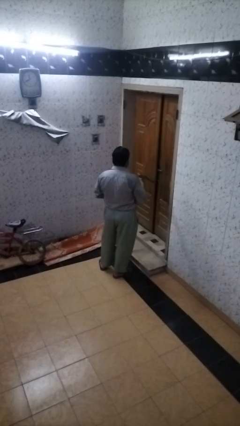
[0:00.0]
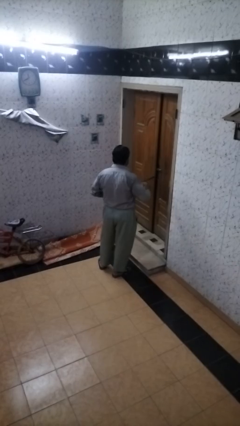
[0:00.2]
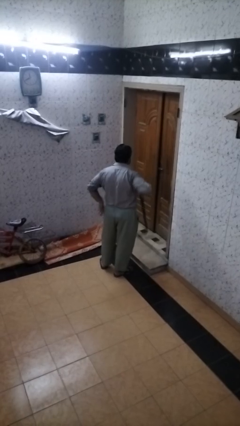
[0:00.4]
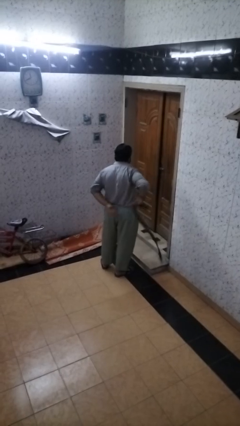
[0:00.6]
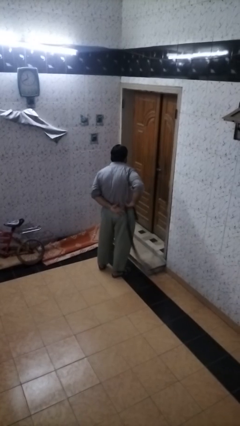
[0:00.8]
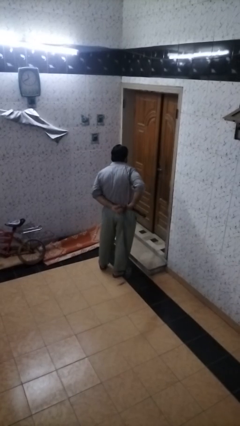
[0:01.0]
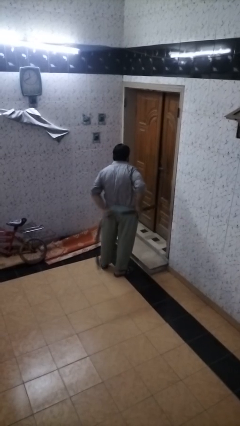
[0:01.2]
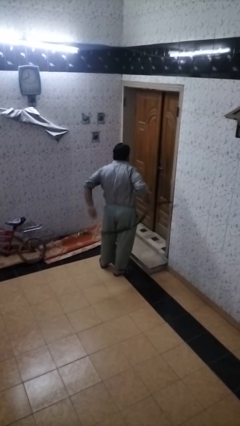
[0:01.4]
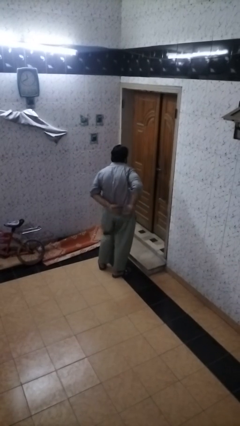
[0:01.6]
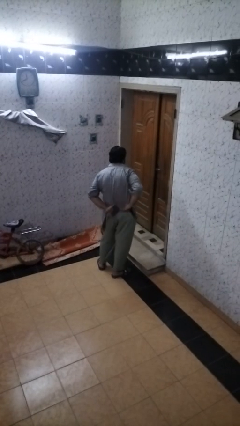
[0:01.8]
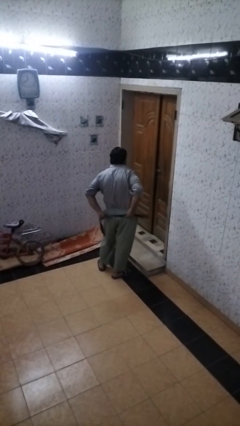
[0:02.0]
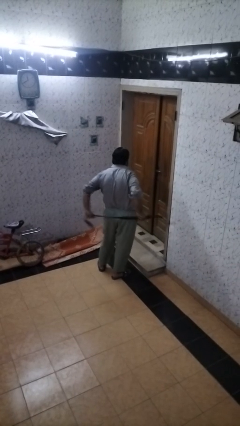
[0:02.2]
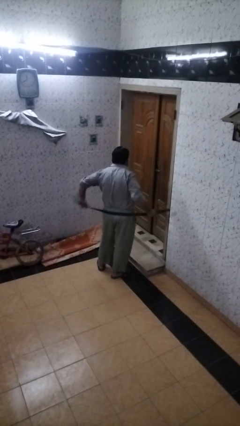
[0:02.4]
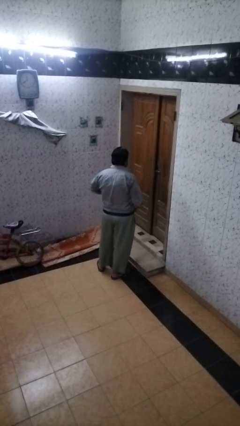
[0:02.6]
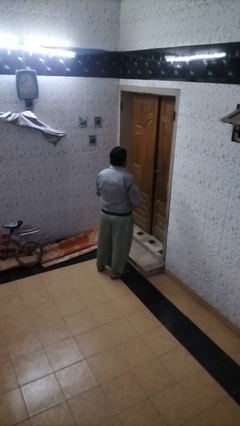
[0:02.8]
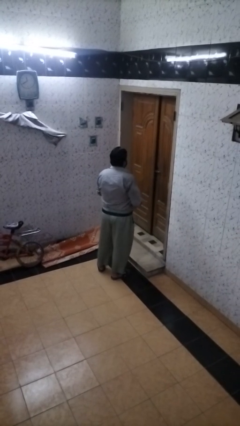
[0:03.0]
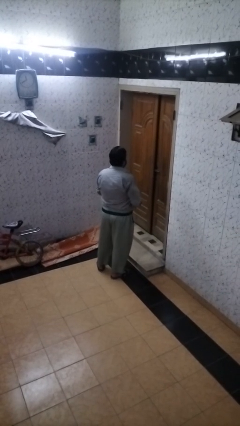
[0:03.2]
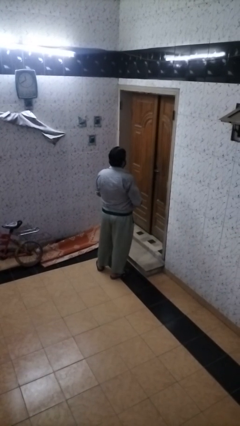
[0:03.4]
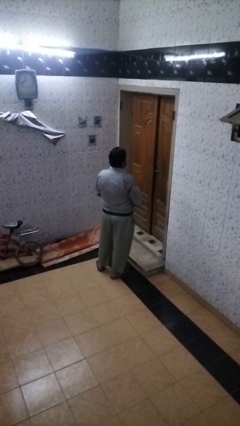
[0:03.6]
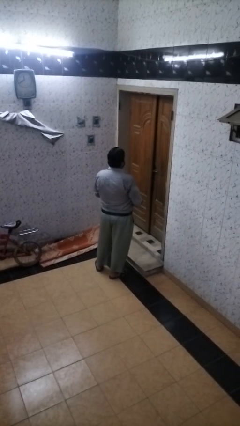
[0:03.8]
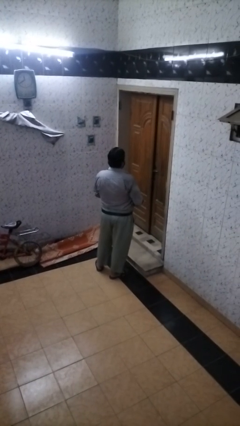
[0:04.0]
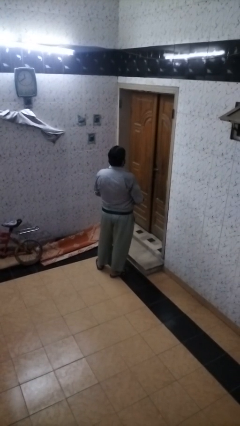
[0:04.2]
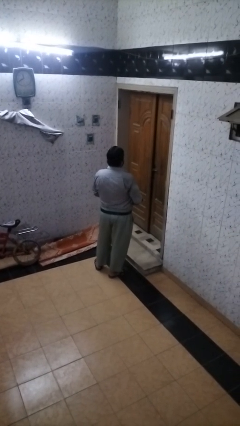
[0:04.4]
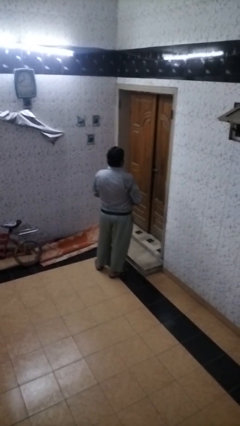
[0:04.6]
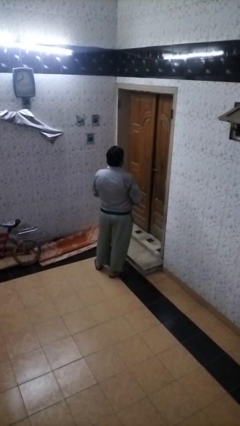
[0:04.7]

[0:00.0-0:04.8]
person puts on belt

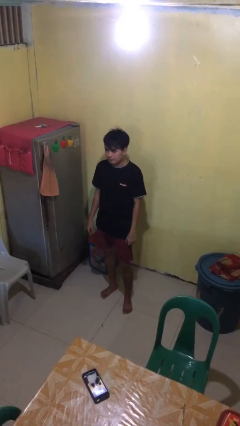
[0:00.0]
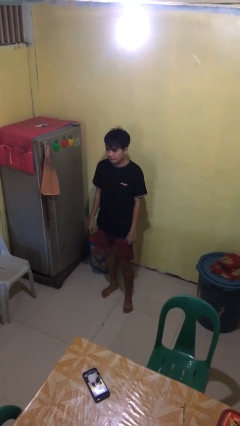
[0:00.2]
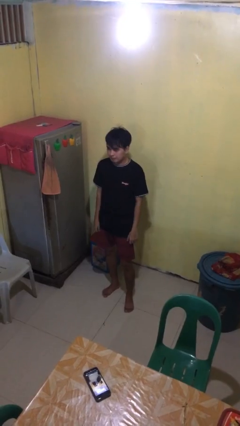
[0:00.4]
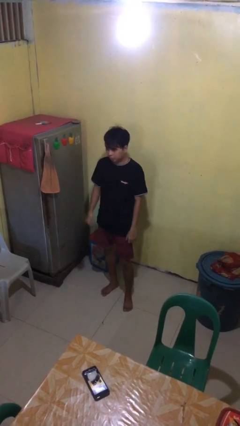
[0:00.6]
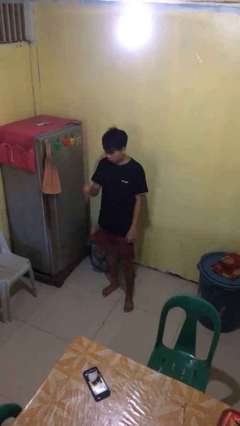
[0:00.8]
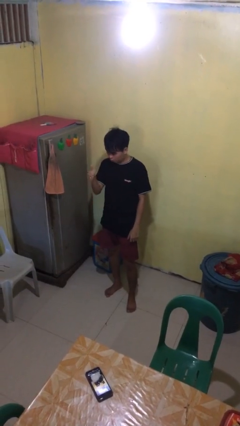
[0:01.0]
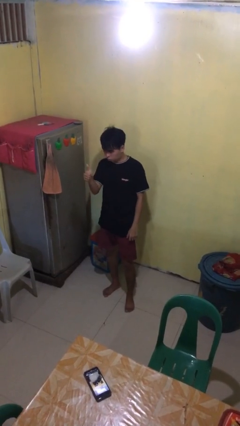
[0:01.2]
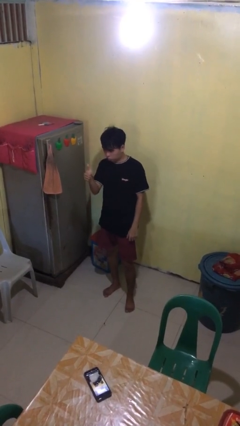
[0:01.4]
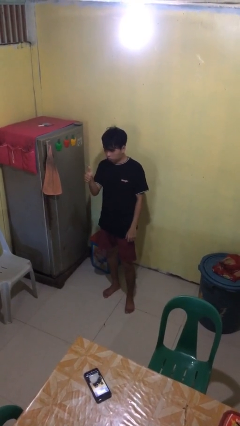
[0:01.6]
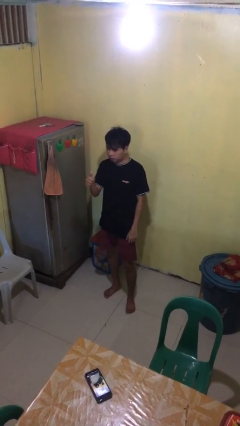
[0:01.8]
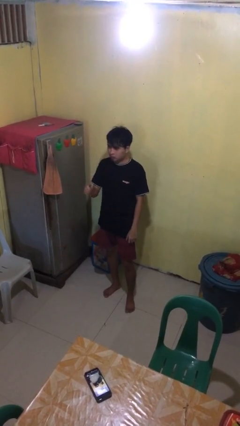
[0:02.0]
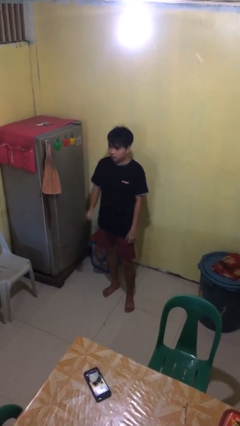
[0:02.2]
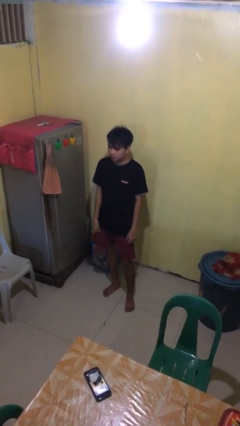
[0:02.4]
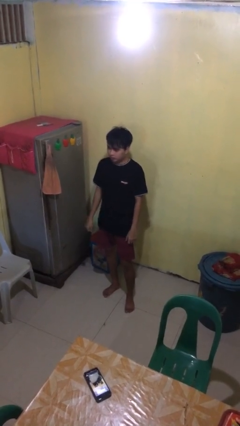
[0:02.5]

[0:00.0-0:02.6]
person gestures thumbs up

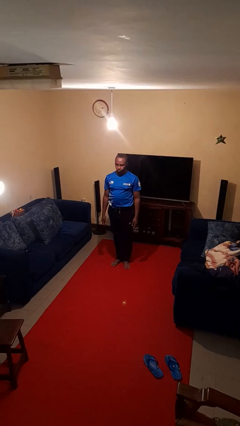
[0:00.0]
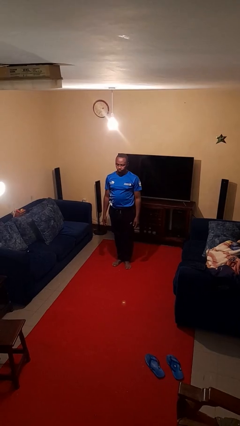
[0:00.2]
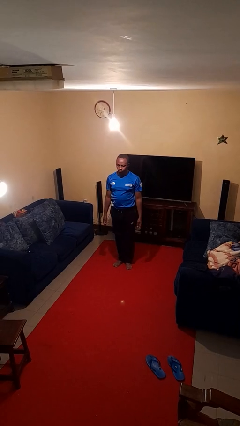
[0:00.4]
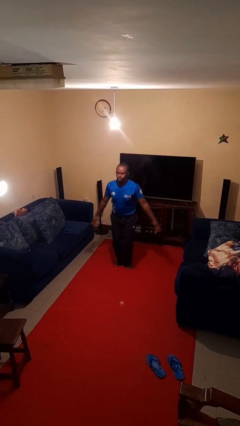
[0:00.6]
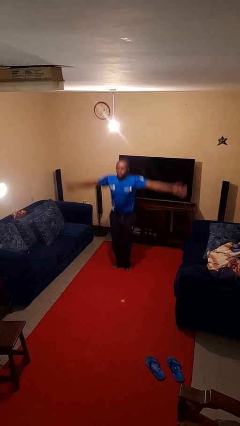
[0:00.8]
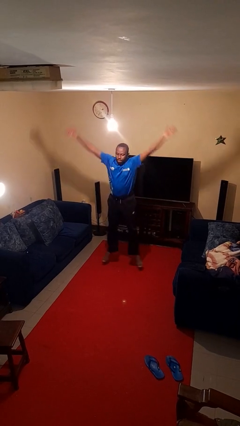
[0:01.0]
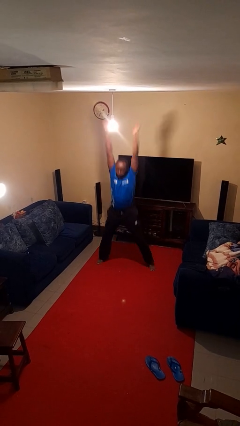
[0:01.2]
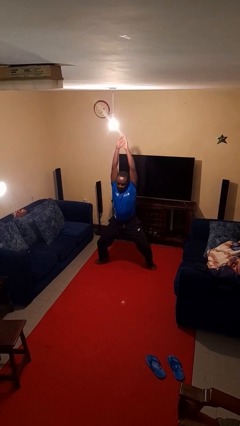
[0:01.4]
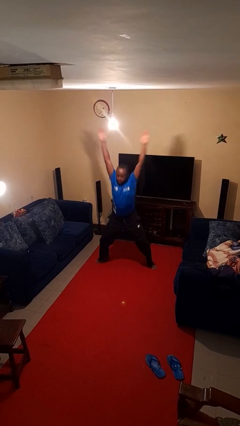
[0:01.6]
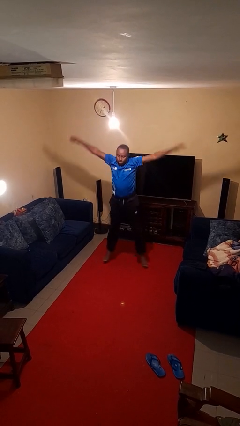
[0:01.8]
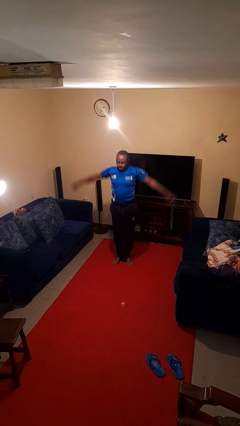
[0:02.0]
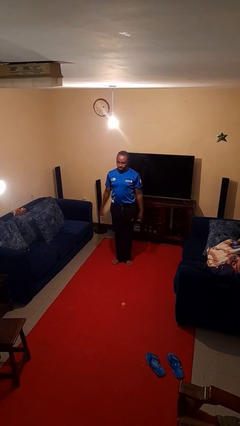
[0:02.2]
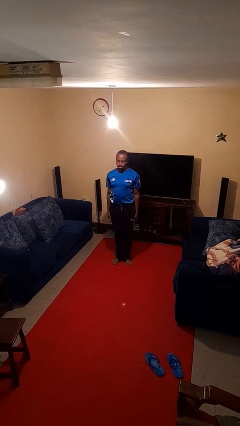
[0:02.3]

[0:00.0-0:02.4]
person exercises with jumping jacks

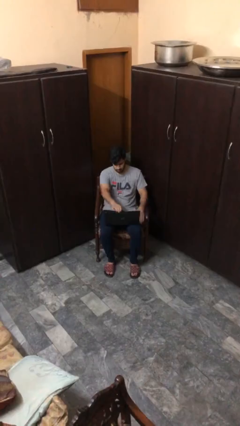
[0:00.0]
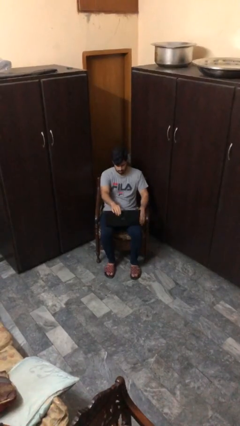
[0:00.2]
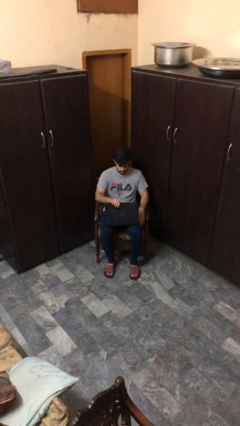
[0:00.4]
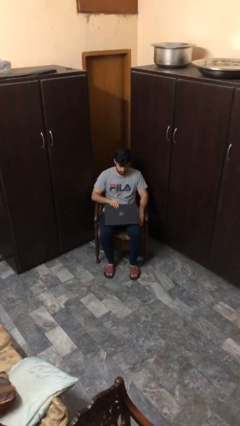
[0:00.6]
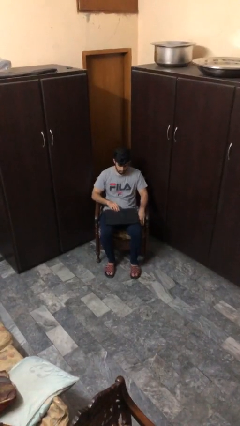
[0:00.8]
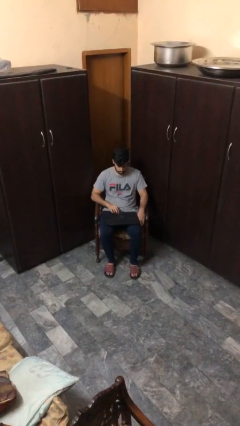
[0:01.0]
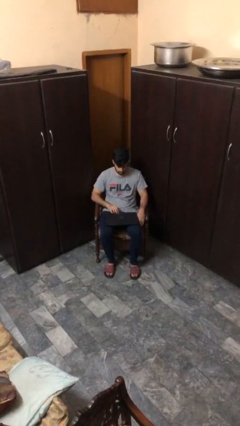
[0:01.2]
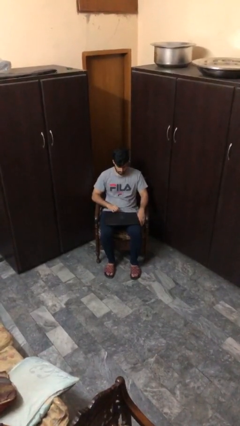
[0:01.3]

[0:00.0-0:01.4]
person closes laptop

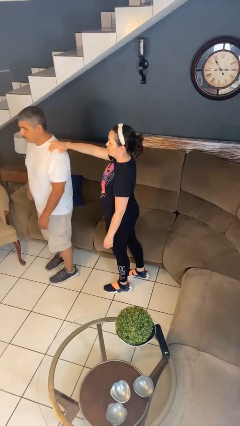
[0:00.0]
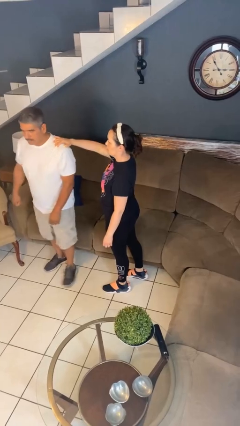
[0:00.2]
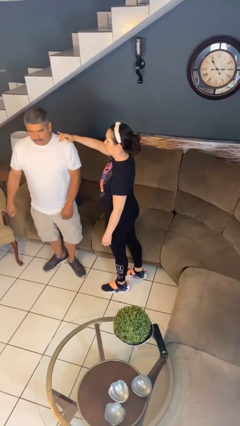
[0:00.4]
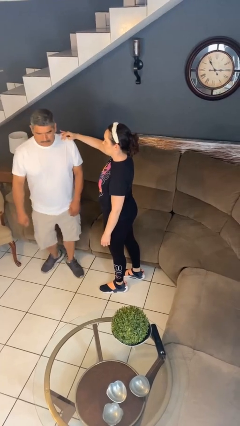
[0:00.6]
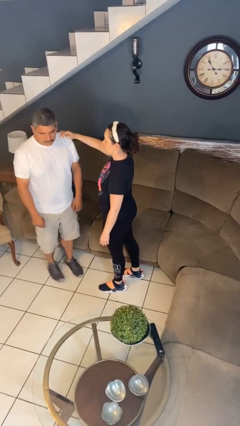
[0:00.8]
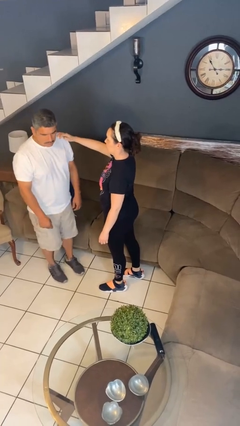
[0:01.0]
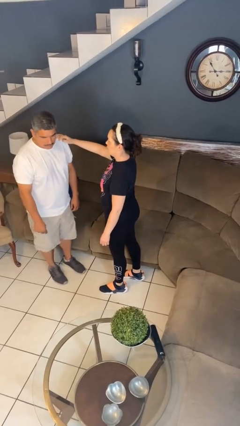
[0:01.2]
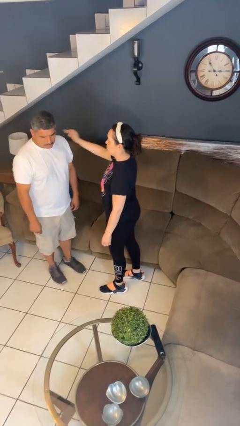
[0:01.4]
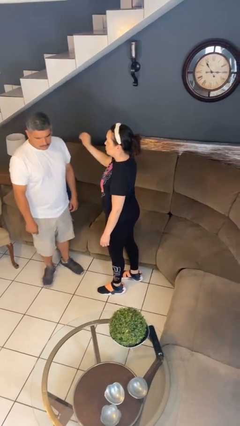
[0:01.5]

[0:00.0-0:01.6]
person spins person around

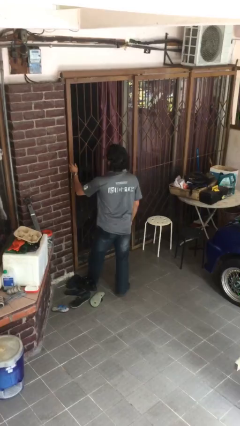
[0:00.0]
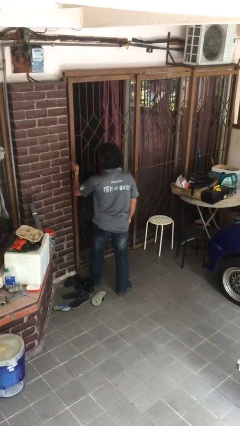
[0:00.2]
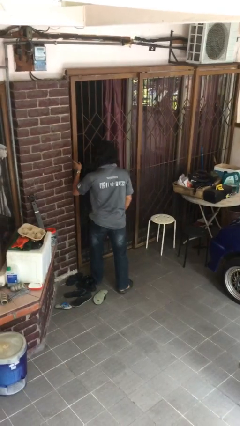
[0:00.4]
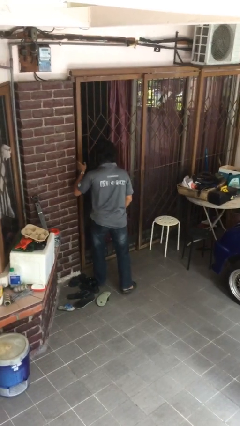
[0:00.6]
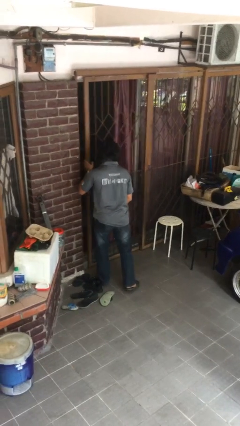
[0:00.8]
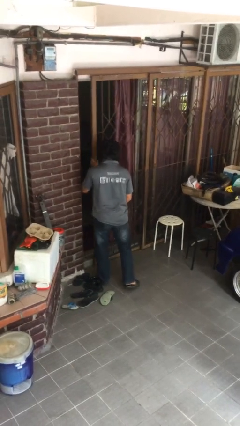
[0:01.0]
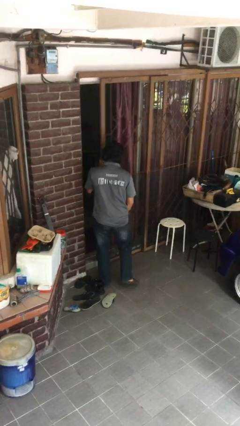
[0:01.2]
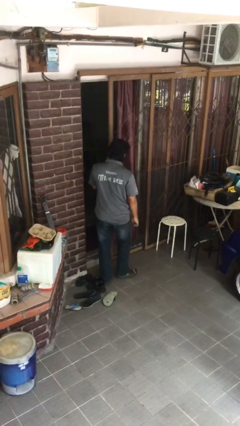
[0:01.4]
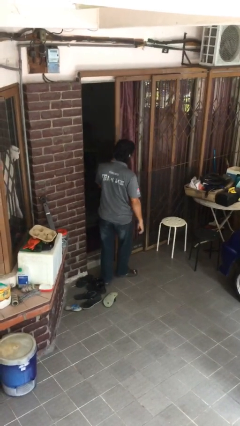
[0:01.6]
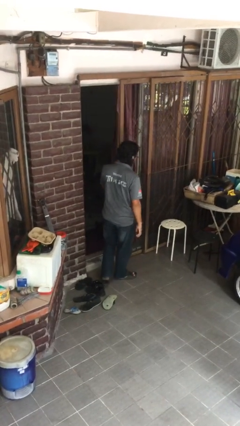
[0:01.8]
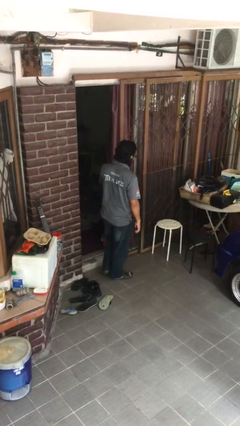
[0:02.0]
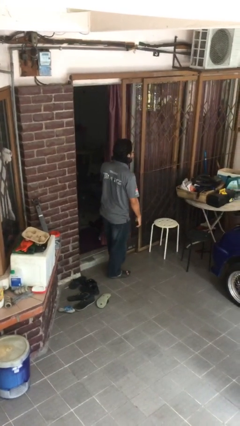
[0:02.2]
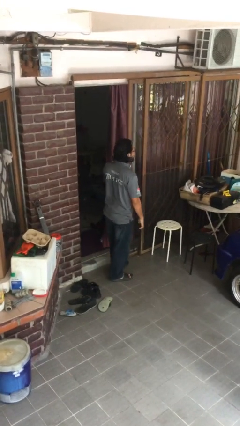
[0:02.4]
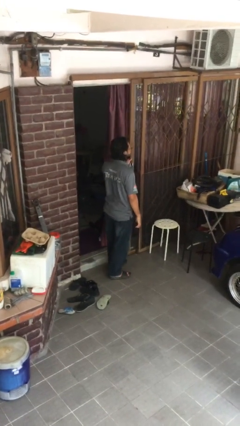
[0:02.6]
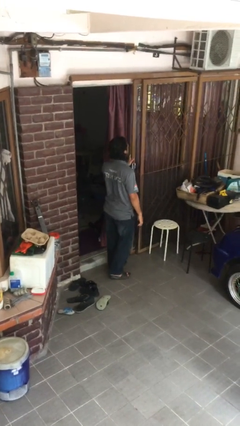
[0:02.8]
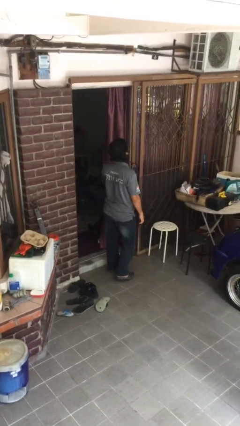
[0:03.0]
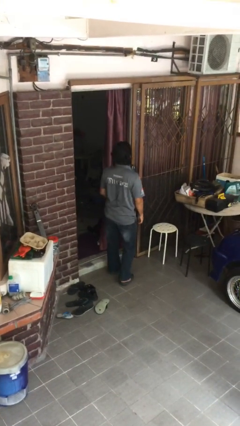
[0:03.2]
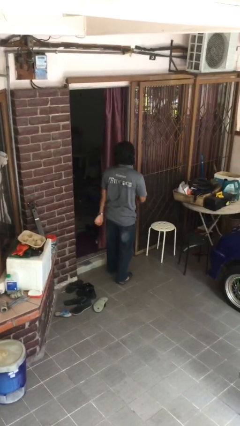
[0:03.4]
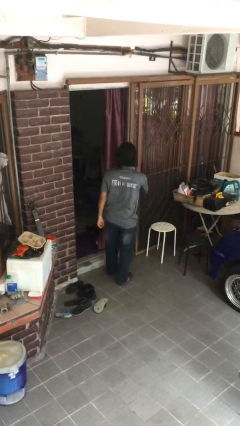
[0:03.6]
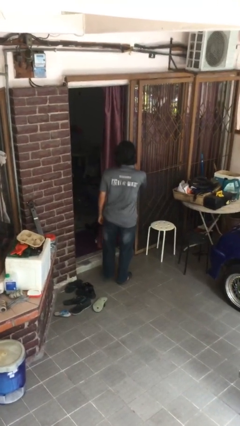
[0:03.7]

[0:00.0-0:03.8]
person opens facility door

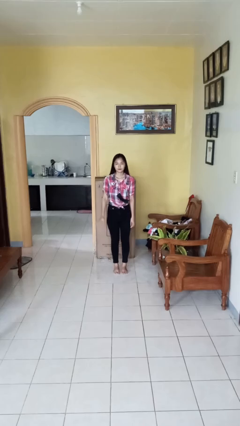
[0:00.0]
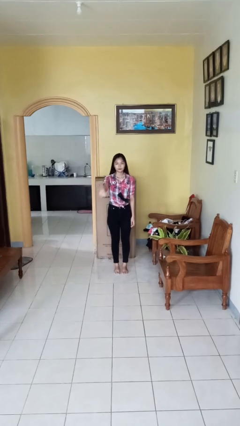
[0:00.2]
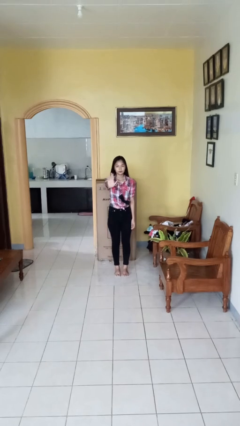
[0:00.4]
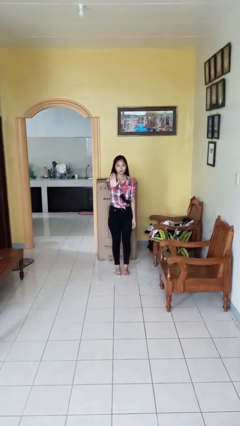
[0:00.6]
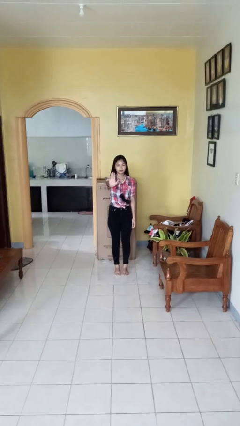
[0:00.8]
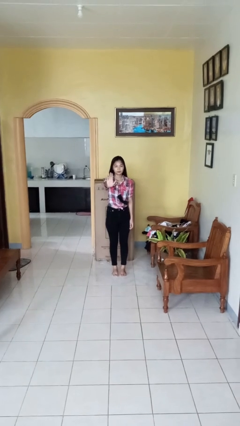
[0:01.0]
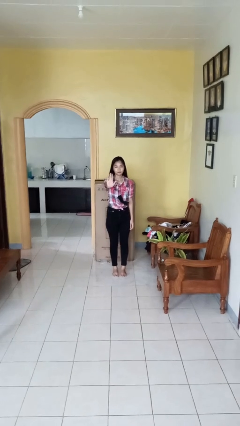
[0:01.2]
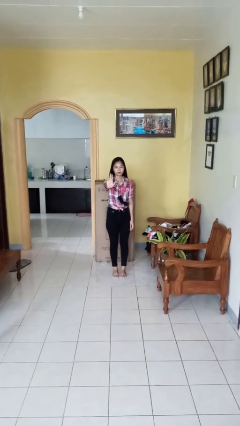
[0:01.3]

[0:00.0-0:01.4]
person gestures stop
